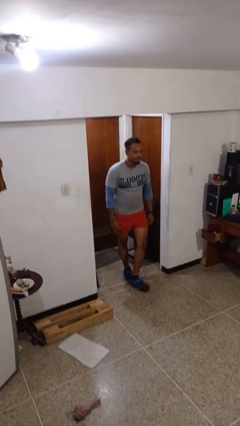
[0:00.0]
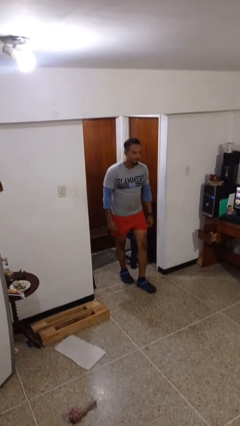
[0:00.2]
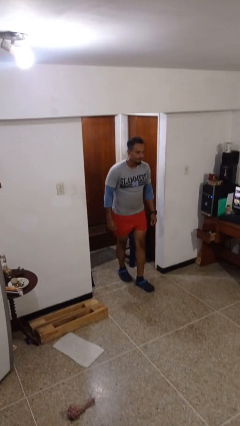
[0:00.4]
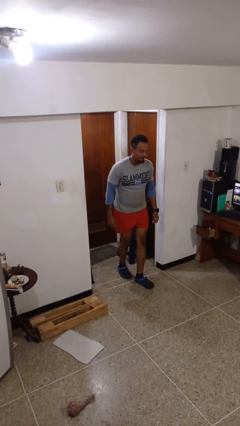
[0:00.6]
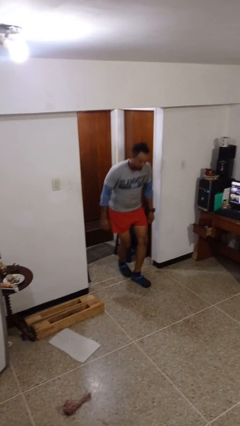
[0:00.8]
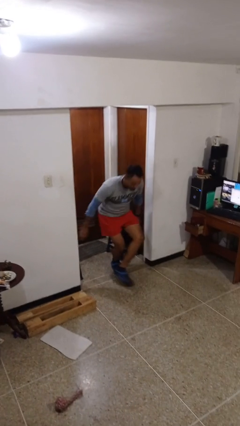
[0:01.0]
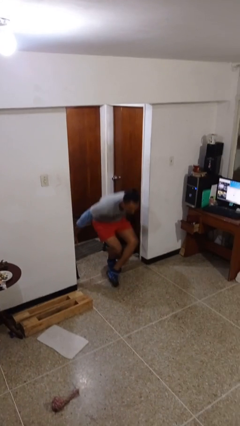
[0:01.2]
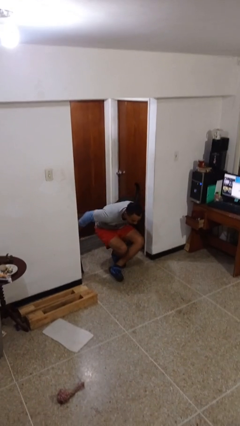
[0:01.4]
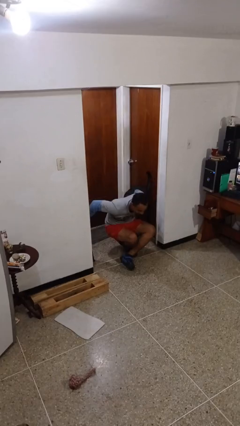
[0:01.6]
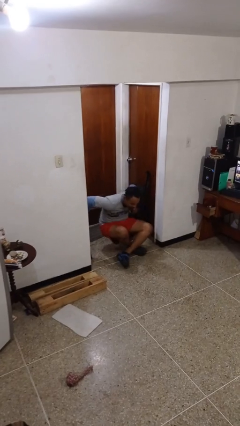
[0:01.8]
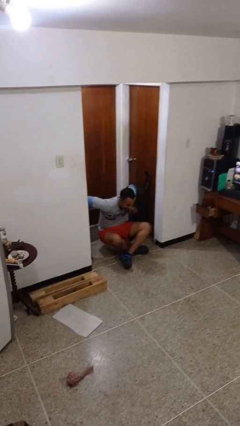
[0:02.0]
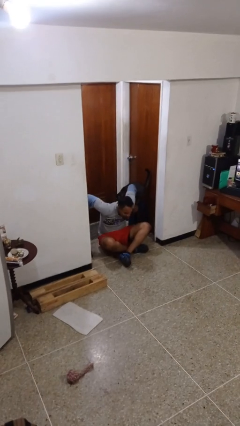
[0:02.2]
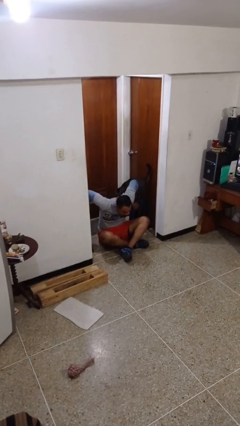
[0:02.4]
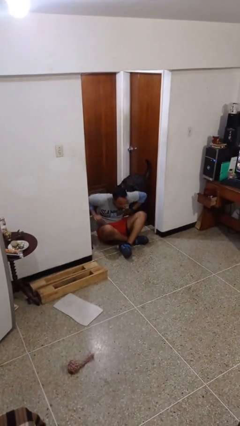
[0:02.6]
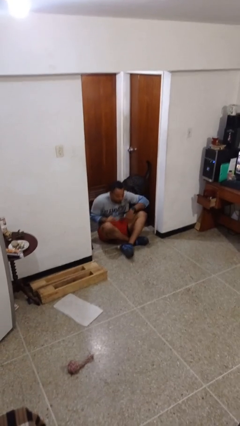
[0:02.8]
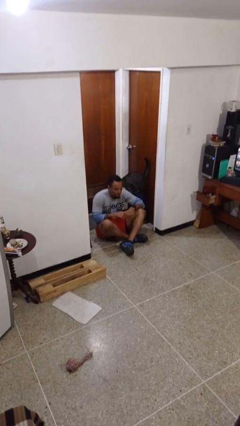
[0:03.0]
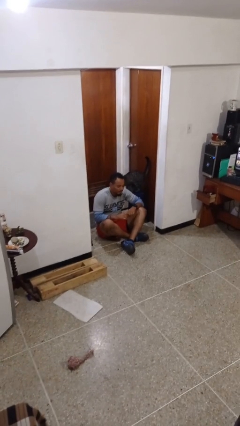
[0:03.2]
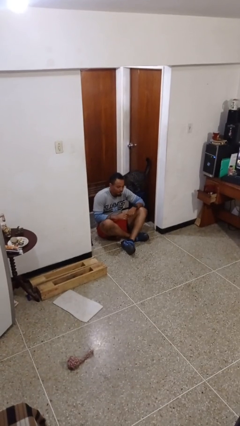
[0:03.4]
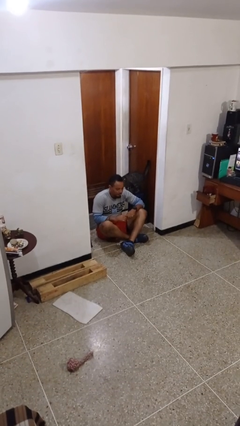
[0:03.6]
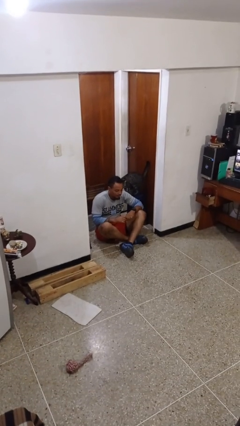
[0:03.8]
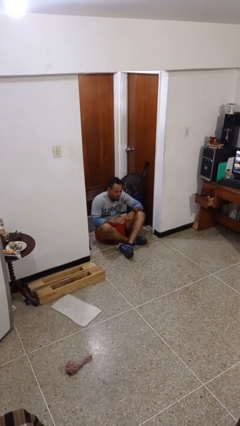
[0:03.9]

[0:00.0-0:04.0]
person sits crisscross

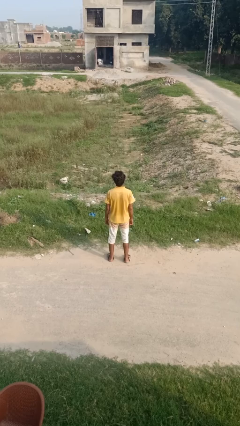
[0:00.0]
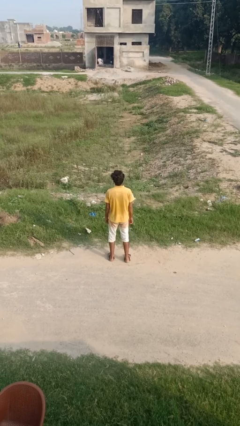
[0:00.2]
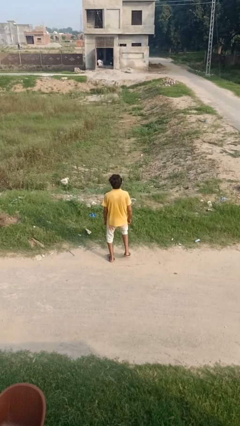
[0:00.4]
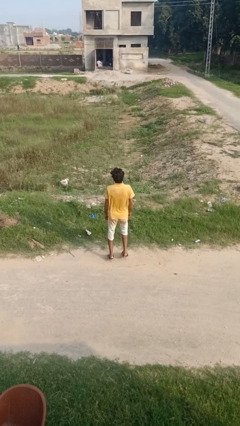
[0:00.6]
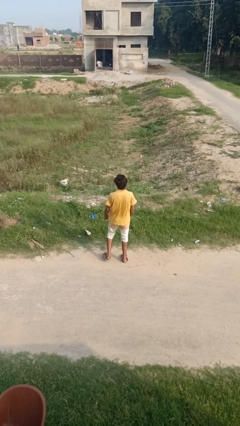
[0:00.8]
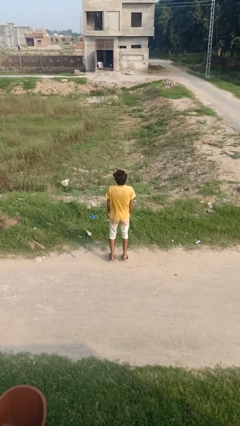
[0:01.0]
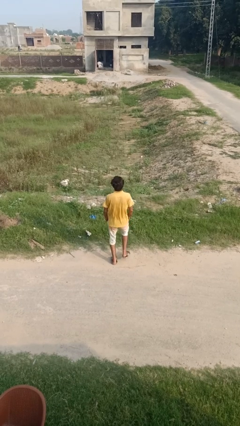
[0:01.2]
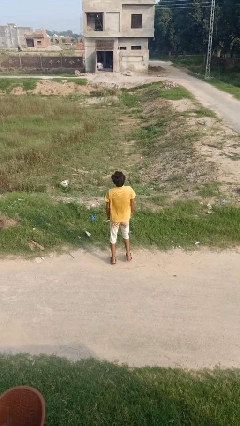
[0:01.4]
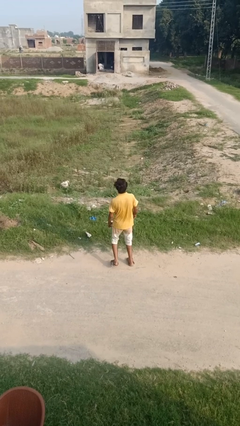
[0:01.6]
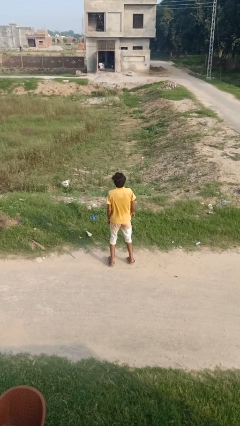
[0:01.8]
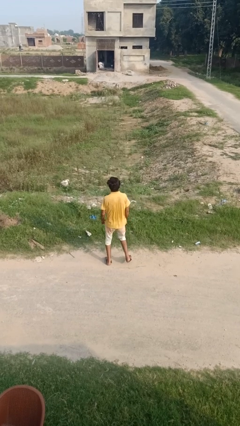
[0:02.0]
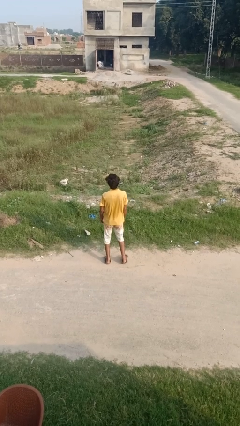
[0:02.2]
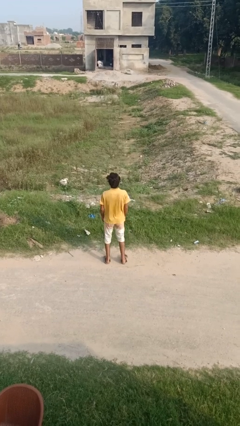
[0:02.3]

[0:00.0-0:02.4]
person dances in place

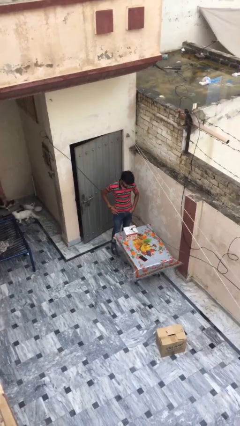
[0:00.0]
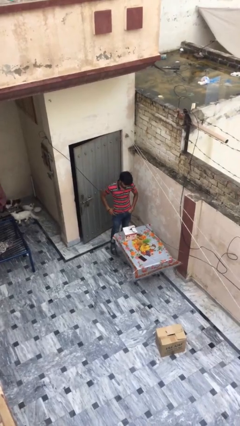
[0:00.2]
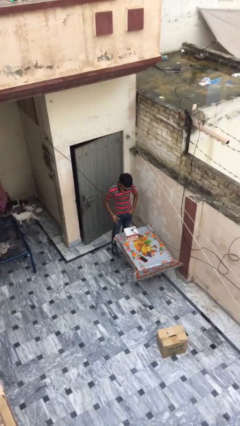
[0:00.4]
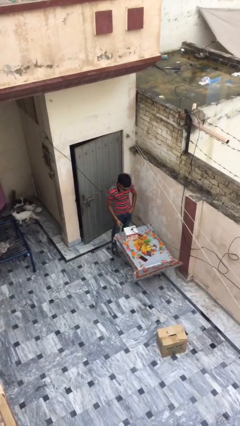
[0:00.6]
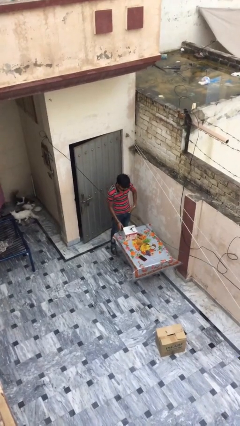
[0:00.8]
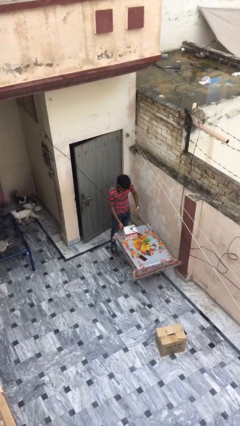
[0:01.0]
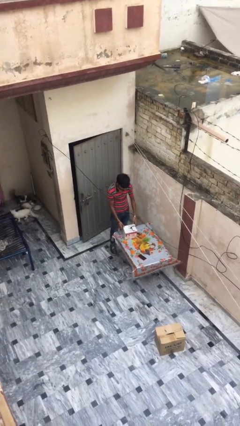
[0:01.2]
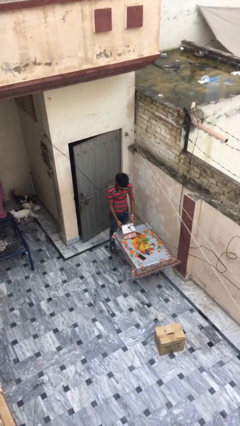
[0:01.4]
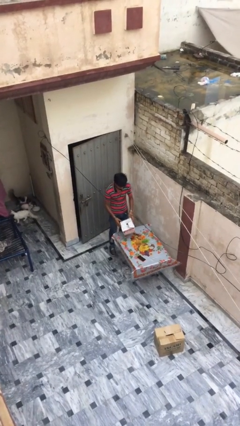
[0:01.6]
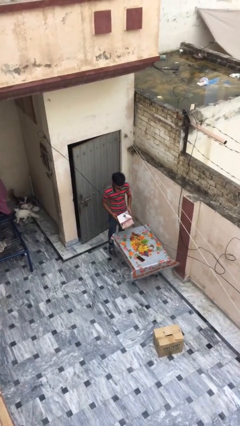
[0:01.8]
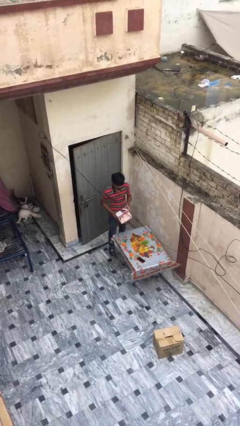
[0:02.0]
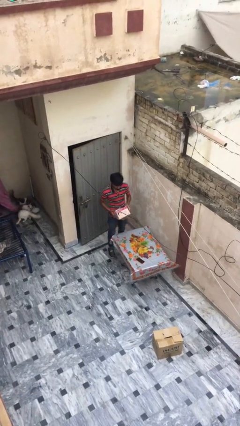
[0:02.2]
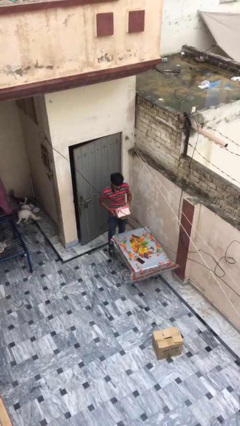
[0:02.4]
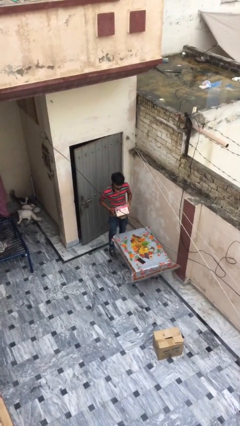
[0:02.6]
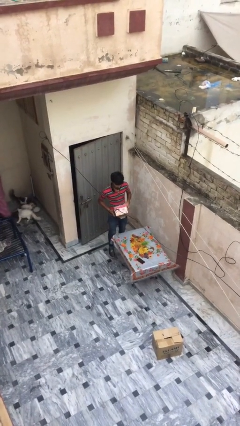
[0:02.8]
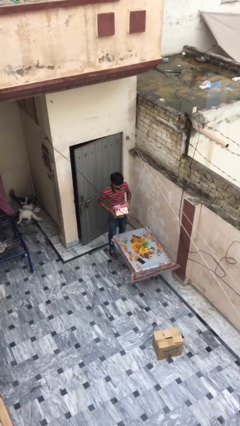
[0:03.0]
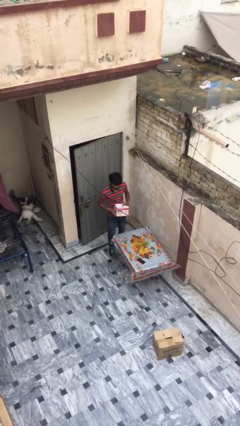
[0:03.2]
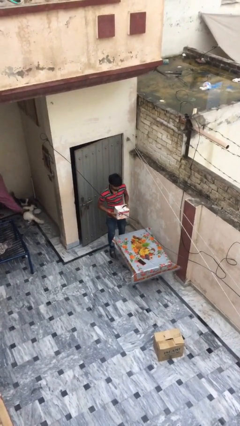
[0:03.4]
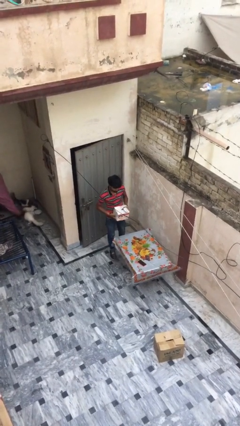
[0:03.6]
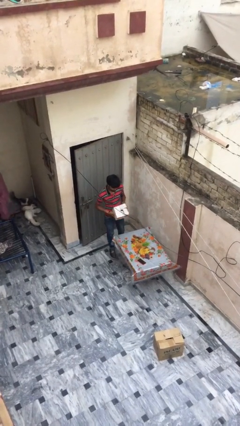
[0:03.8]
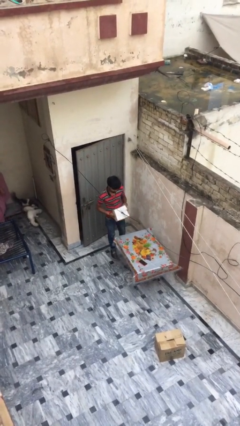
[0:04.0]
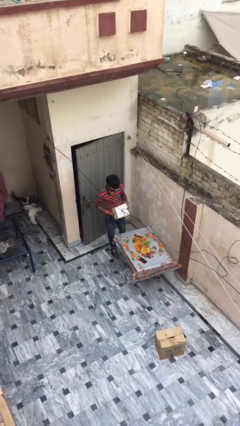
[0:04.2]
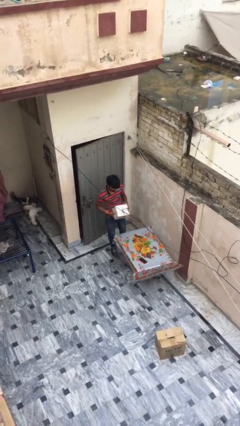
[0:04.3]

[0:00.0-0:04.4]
person picks up object from table

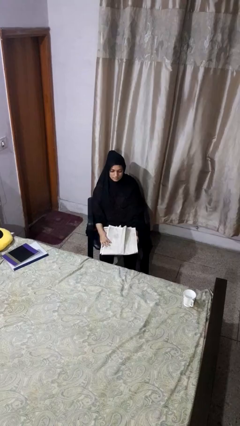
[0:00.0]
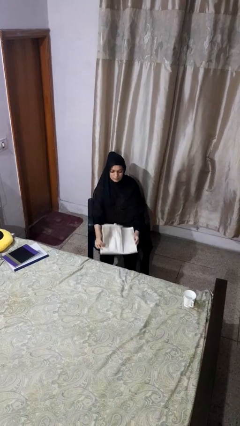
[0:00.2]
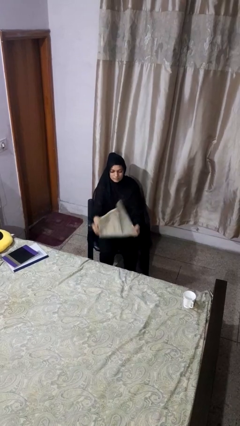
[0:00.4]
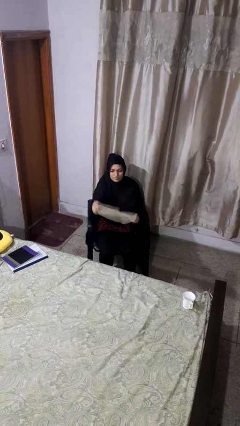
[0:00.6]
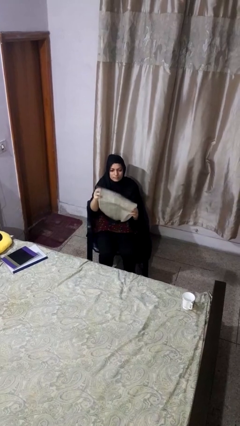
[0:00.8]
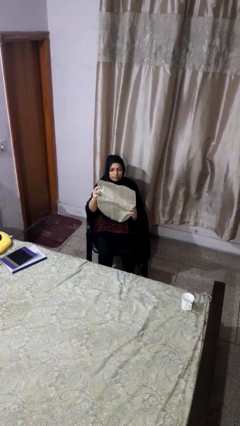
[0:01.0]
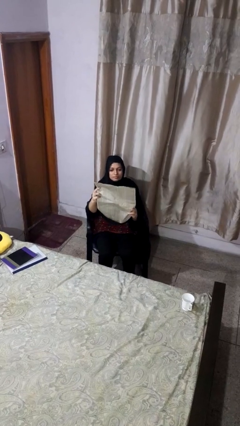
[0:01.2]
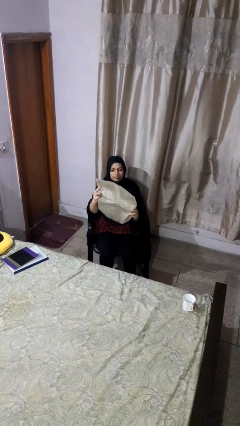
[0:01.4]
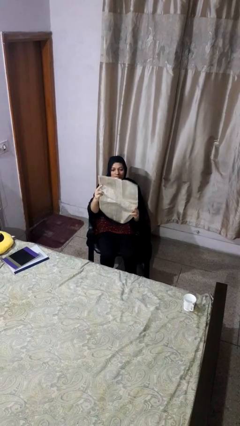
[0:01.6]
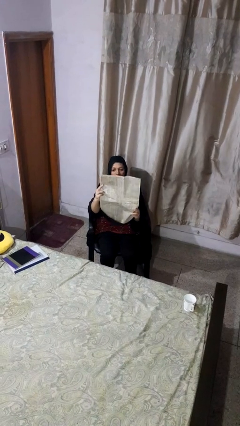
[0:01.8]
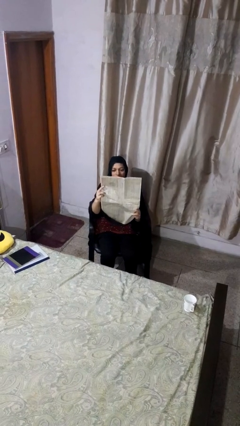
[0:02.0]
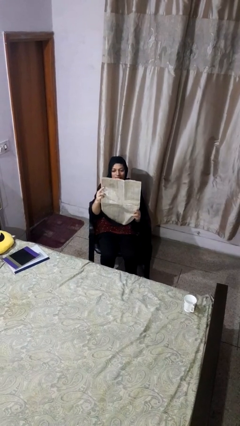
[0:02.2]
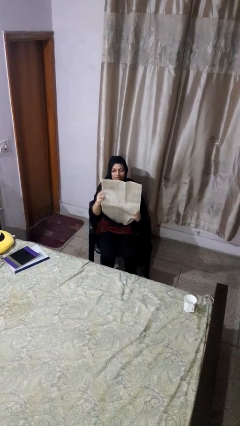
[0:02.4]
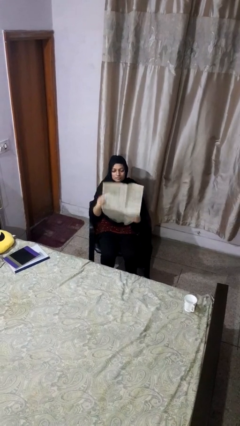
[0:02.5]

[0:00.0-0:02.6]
person reads newspaper

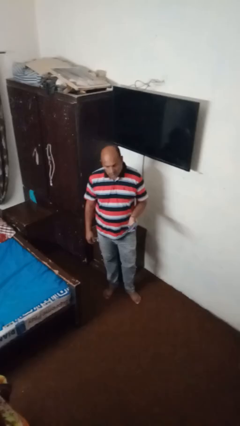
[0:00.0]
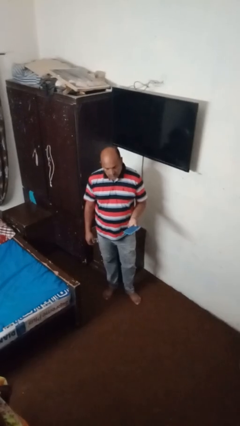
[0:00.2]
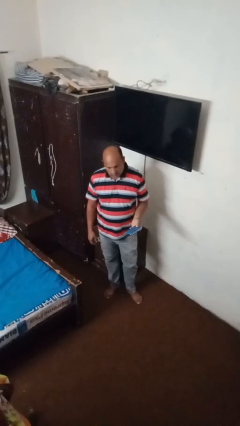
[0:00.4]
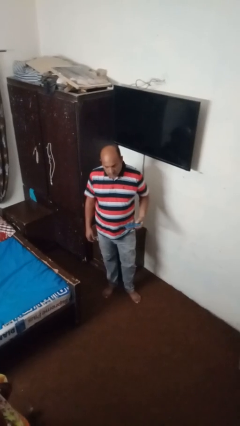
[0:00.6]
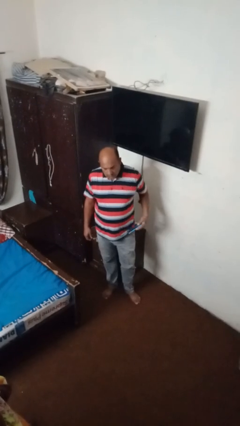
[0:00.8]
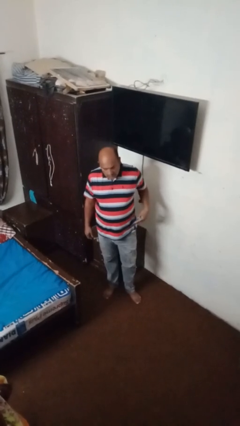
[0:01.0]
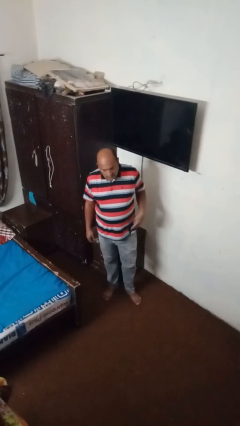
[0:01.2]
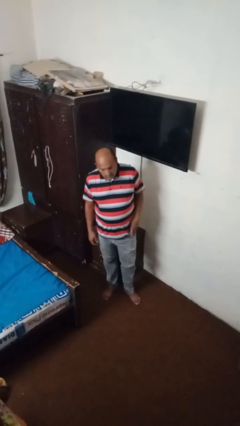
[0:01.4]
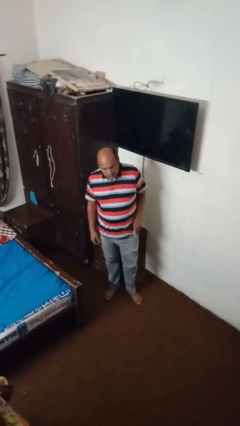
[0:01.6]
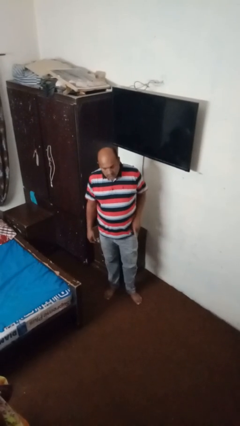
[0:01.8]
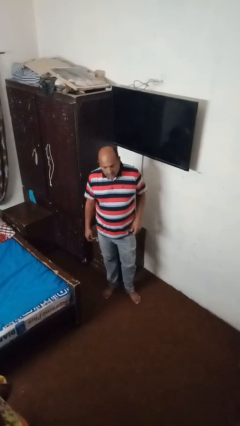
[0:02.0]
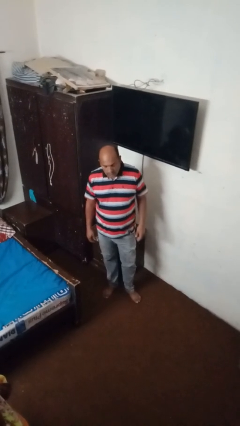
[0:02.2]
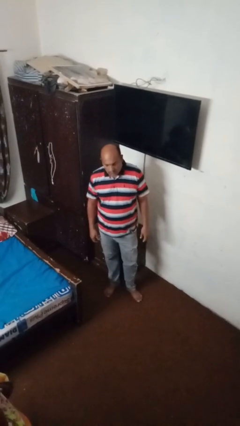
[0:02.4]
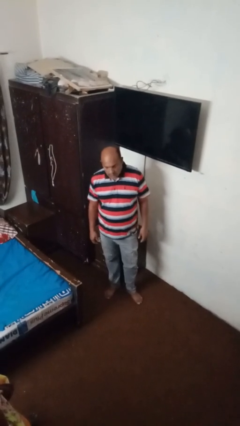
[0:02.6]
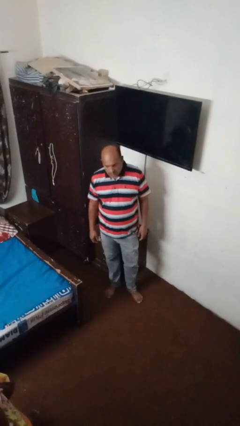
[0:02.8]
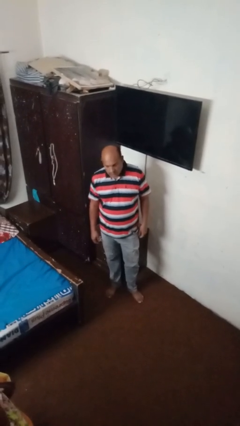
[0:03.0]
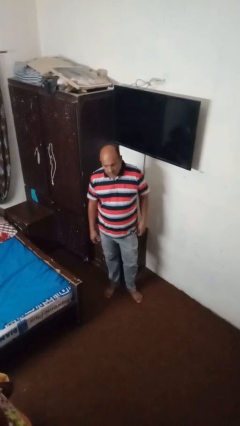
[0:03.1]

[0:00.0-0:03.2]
person puts phone into pocket

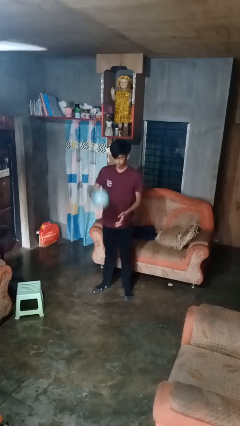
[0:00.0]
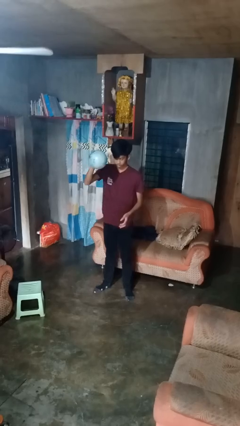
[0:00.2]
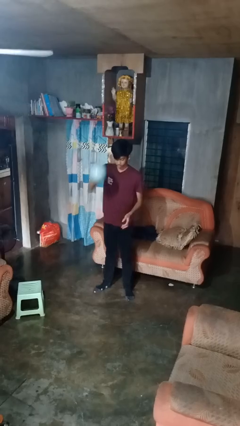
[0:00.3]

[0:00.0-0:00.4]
person bounces ball on floor

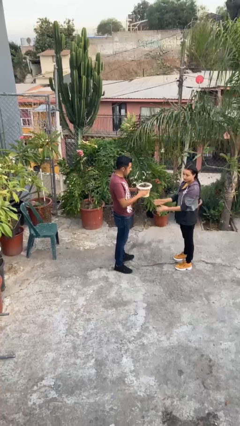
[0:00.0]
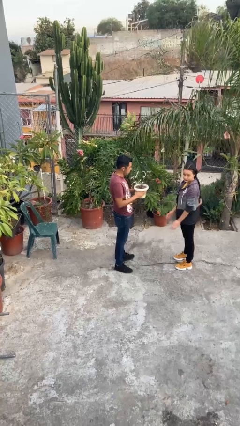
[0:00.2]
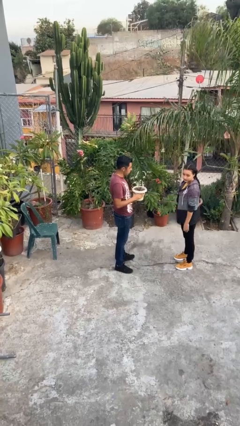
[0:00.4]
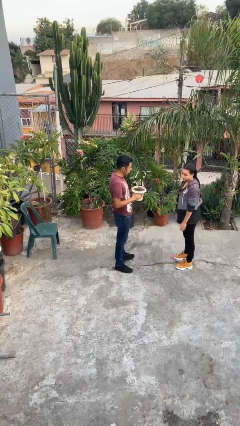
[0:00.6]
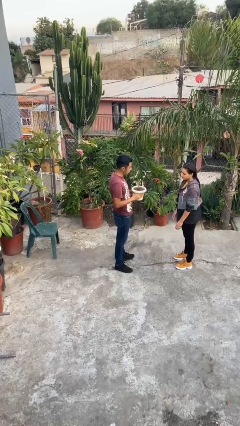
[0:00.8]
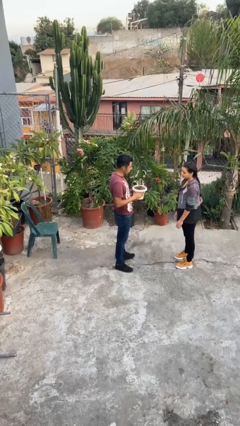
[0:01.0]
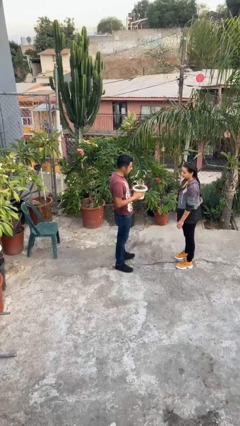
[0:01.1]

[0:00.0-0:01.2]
person transfers object to person
